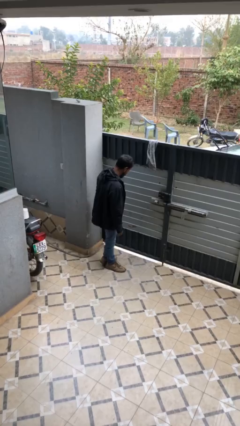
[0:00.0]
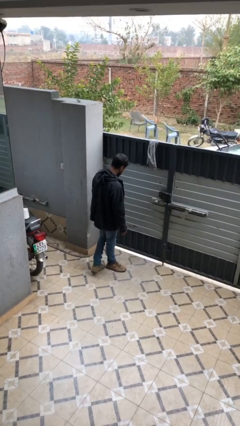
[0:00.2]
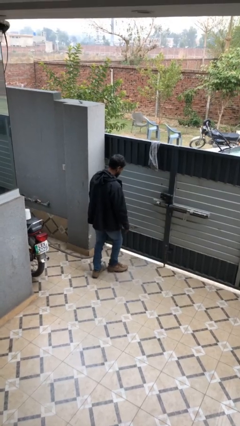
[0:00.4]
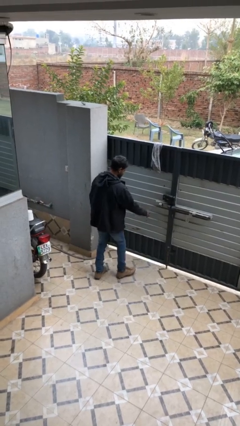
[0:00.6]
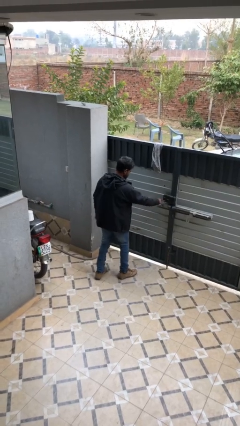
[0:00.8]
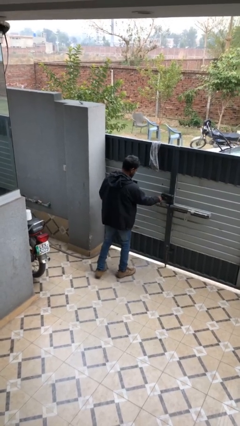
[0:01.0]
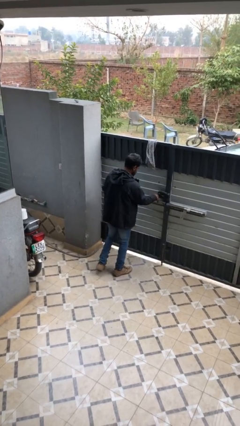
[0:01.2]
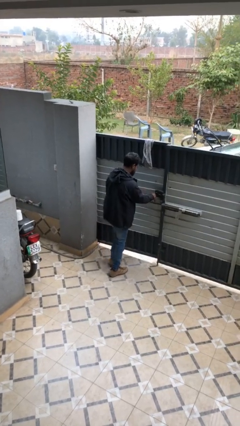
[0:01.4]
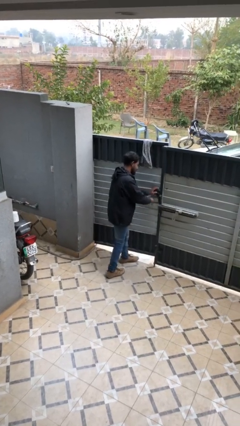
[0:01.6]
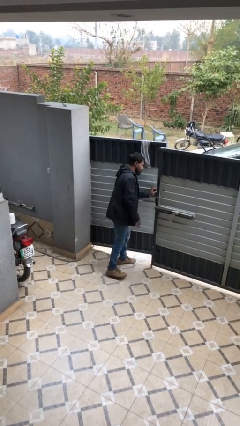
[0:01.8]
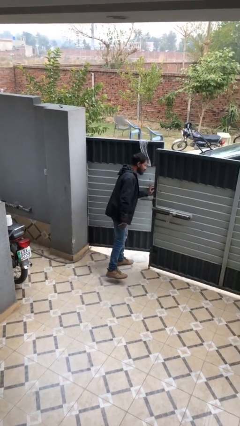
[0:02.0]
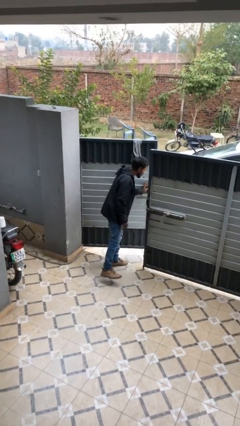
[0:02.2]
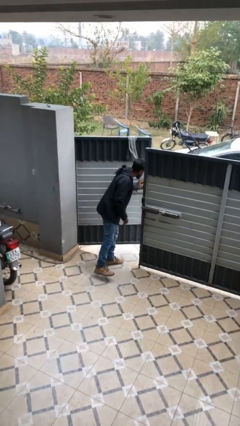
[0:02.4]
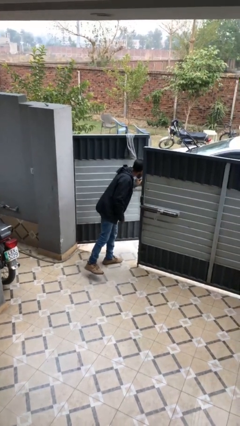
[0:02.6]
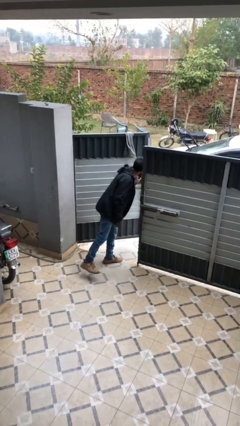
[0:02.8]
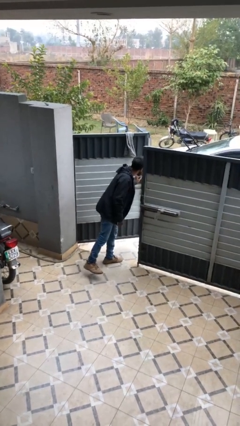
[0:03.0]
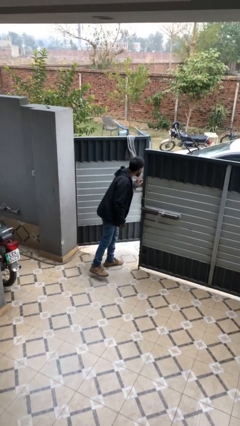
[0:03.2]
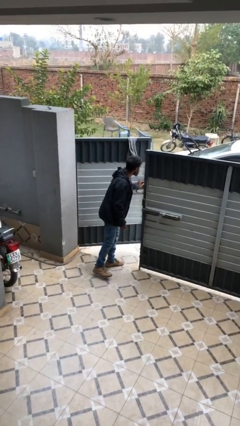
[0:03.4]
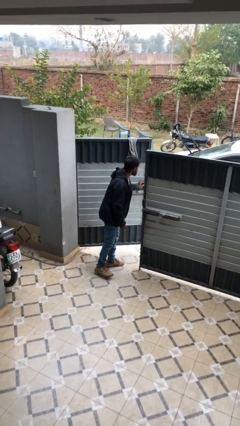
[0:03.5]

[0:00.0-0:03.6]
person opens facility door

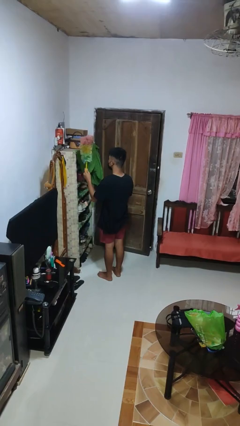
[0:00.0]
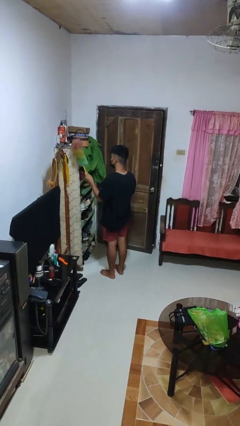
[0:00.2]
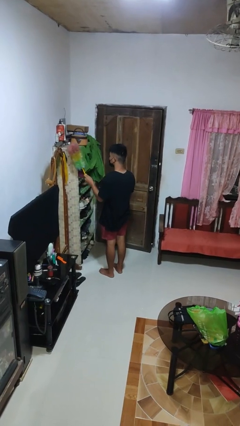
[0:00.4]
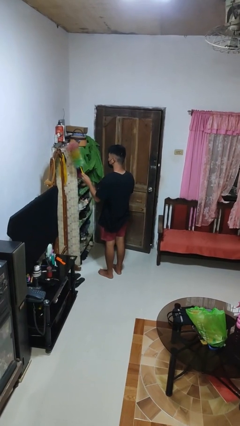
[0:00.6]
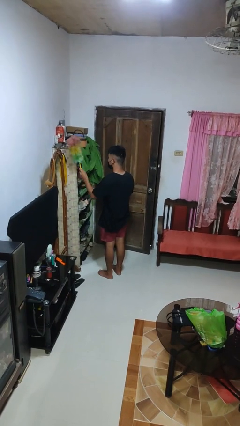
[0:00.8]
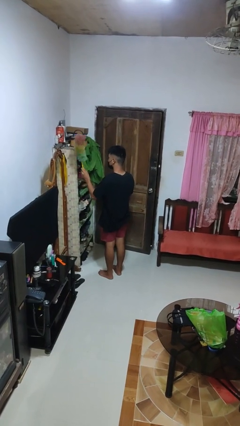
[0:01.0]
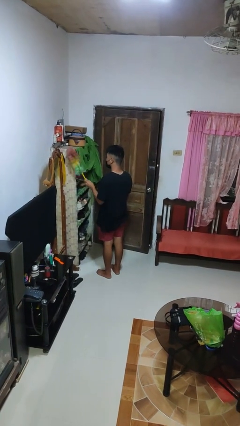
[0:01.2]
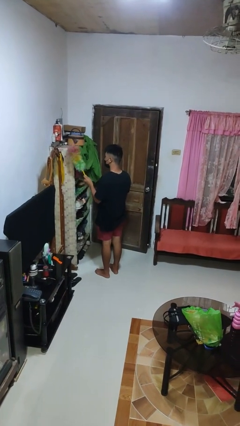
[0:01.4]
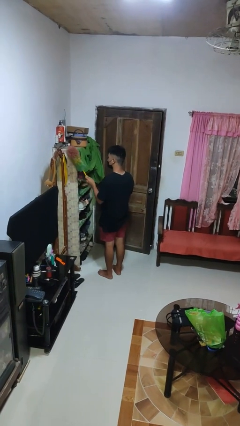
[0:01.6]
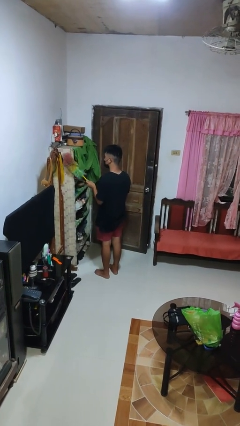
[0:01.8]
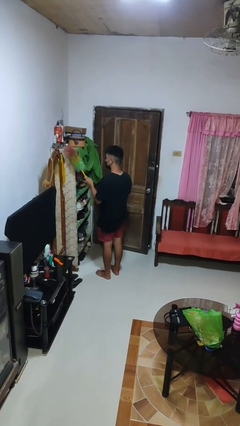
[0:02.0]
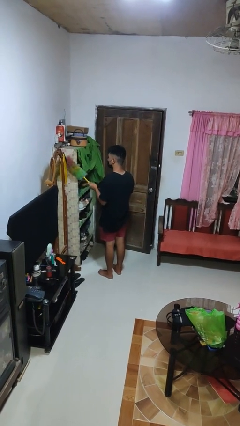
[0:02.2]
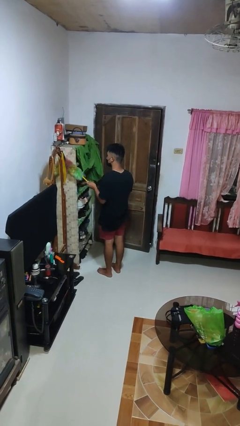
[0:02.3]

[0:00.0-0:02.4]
person dusts furniture

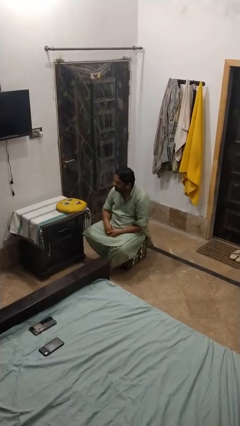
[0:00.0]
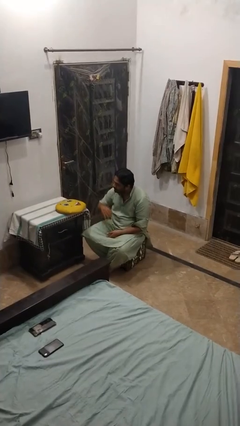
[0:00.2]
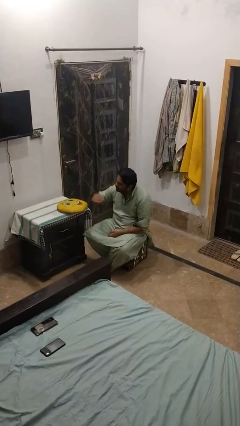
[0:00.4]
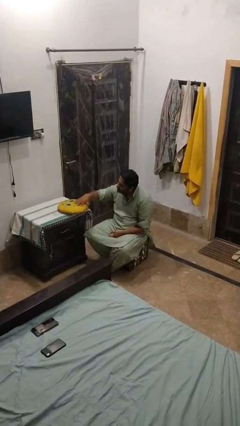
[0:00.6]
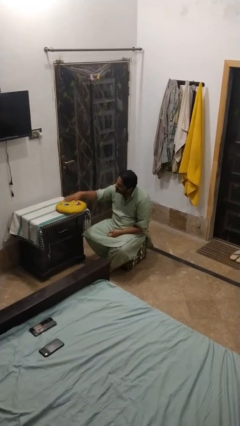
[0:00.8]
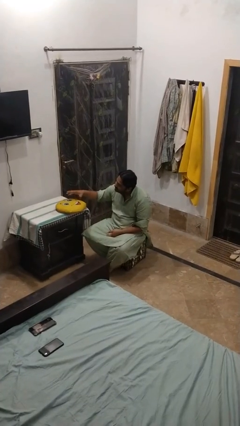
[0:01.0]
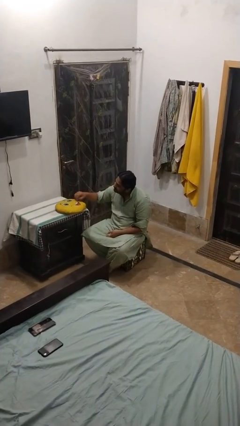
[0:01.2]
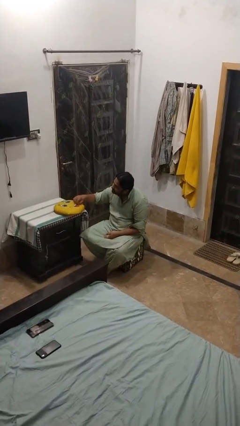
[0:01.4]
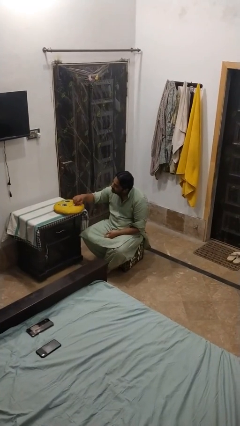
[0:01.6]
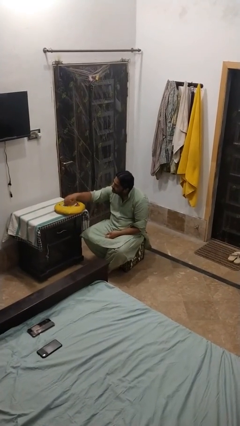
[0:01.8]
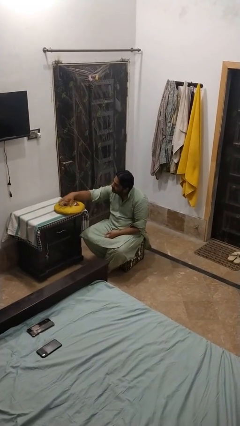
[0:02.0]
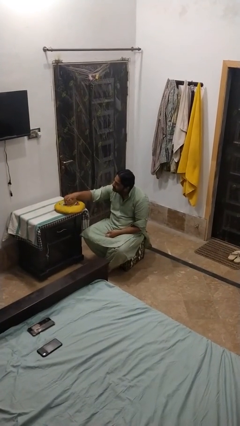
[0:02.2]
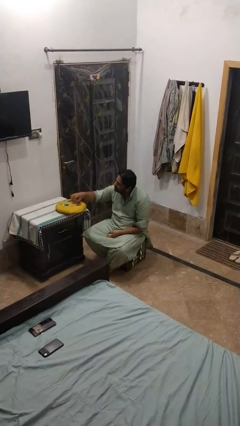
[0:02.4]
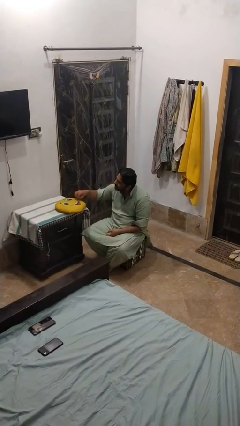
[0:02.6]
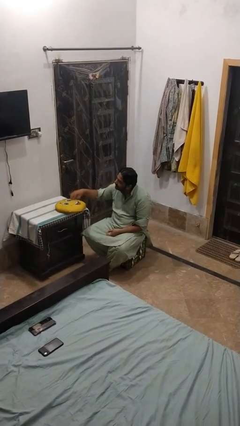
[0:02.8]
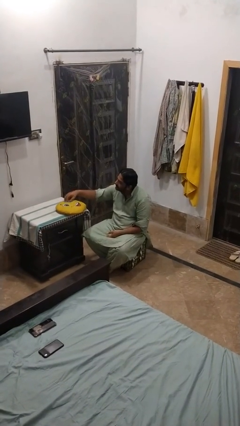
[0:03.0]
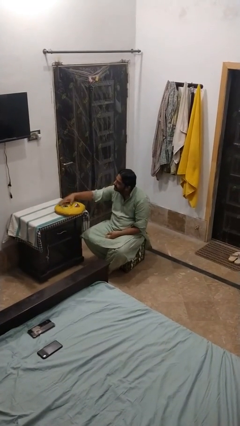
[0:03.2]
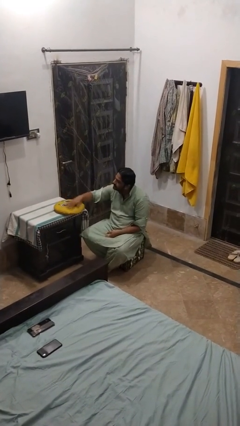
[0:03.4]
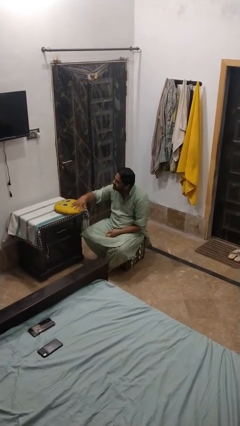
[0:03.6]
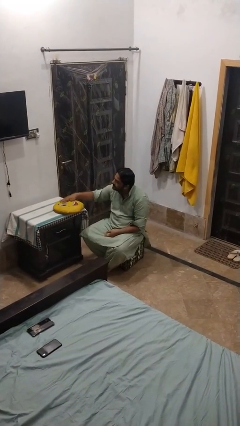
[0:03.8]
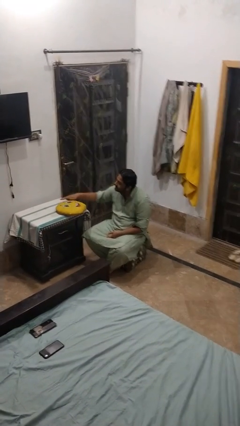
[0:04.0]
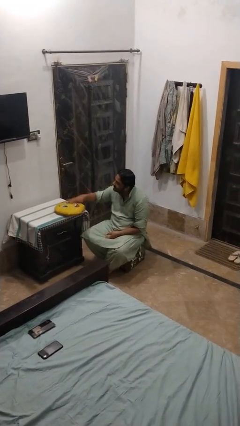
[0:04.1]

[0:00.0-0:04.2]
person waves hand over object

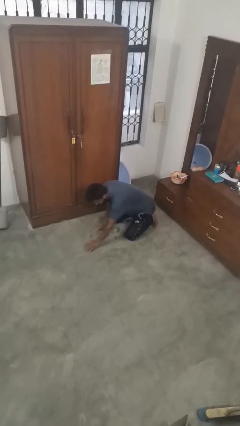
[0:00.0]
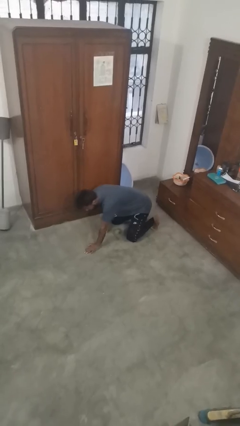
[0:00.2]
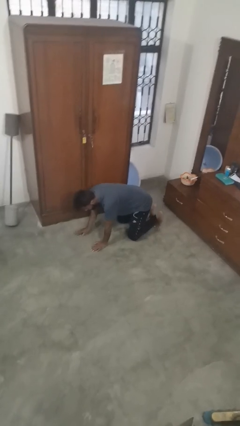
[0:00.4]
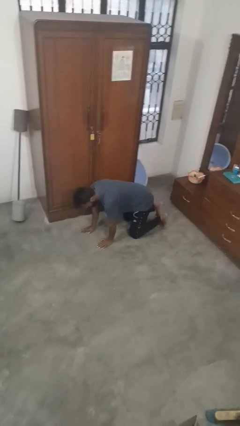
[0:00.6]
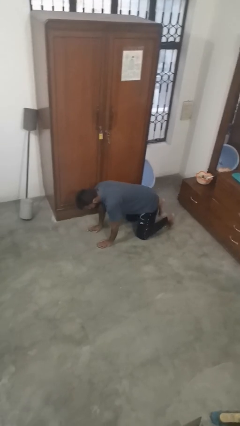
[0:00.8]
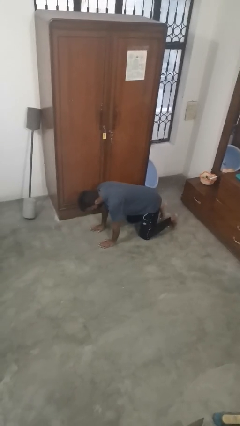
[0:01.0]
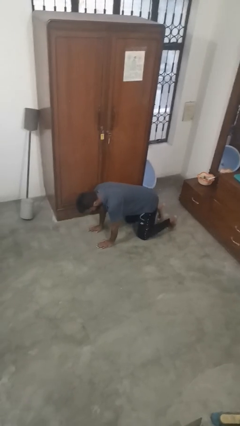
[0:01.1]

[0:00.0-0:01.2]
person crawls

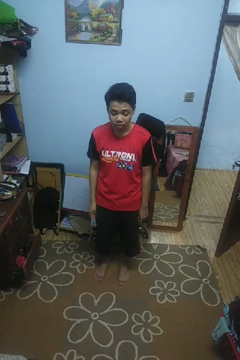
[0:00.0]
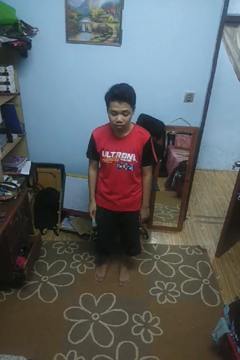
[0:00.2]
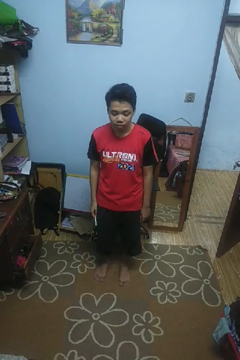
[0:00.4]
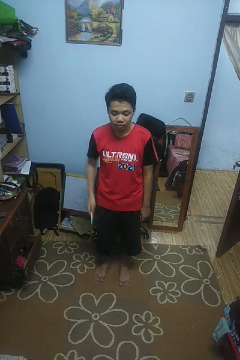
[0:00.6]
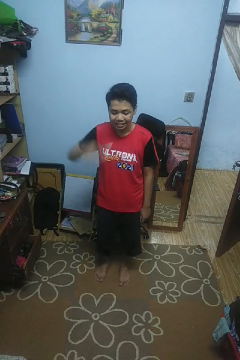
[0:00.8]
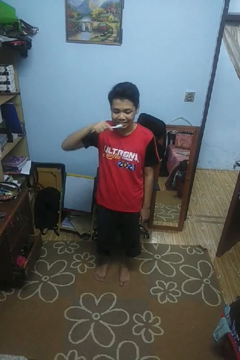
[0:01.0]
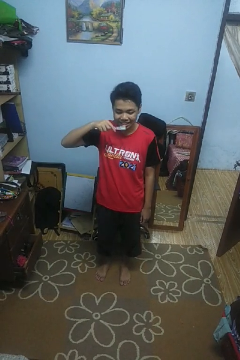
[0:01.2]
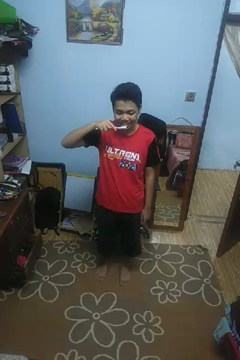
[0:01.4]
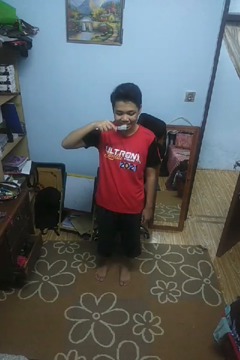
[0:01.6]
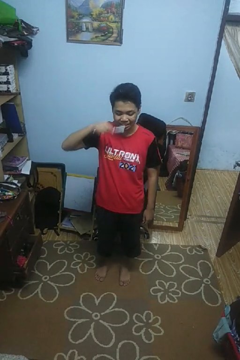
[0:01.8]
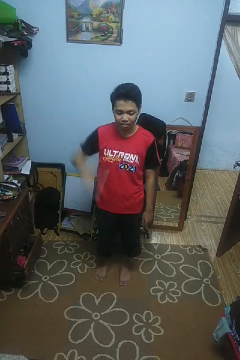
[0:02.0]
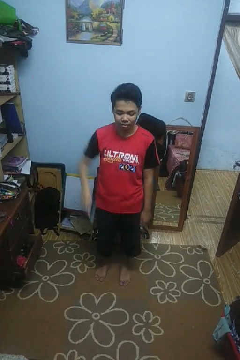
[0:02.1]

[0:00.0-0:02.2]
person brushes teeth

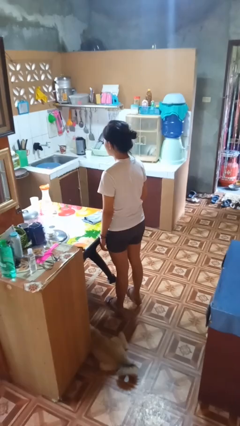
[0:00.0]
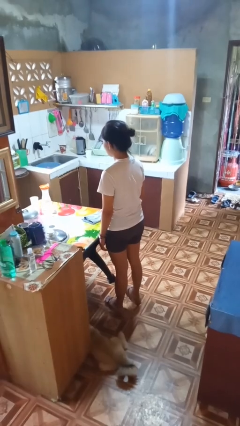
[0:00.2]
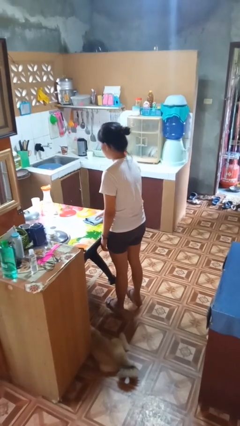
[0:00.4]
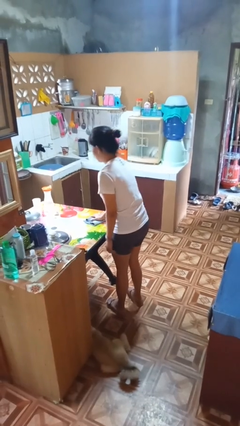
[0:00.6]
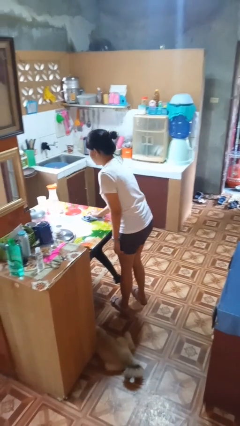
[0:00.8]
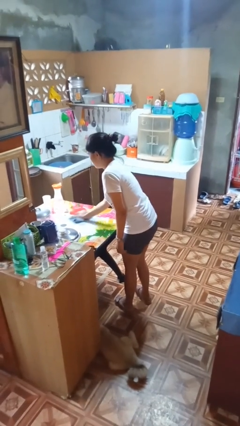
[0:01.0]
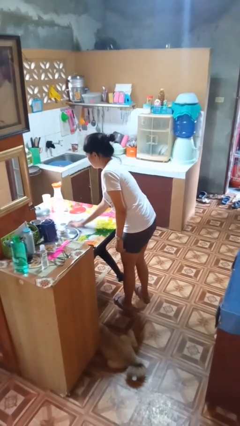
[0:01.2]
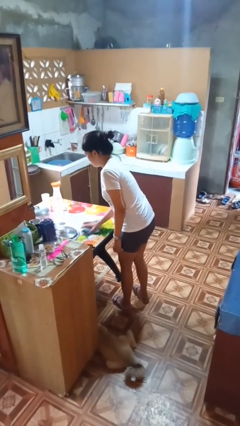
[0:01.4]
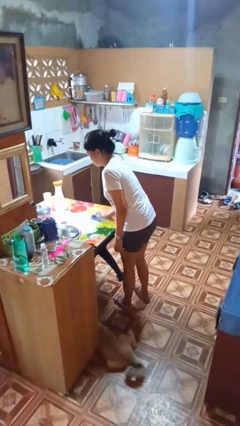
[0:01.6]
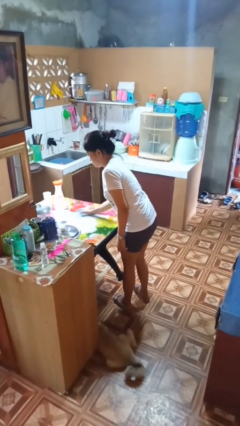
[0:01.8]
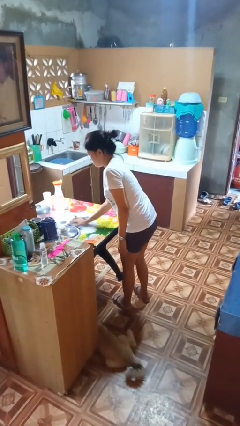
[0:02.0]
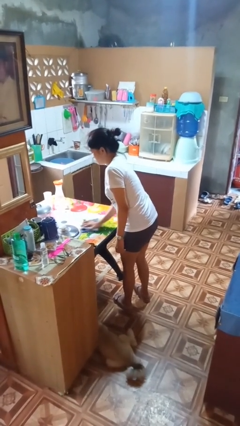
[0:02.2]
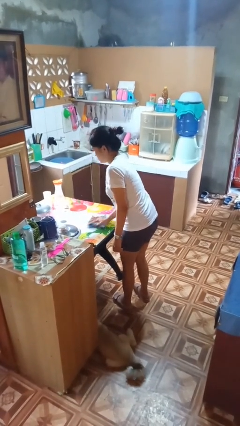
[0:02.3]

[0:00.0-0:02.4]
person cleans table with rag

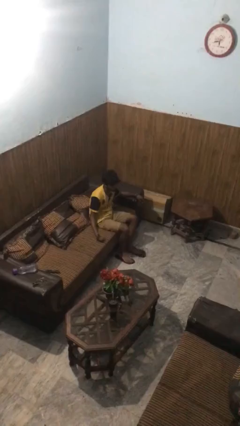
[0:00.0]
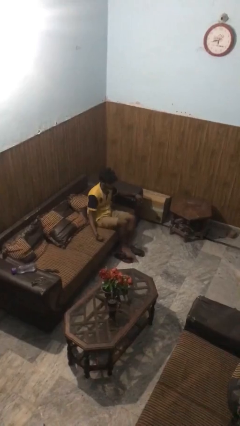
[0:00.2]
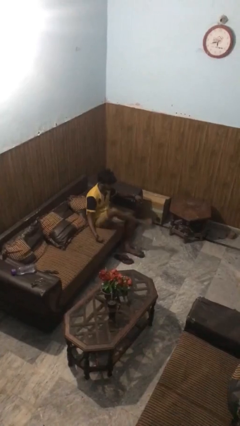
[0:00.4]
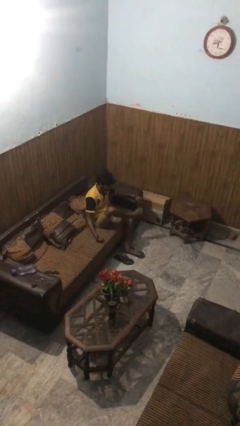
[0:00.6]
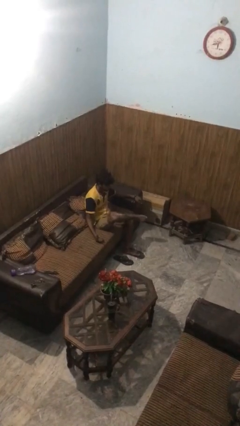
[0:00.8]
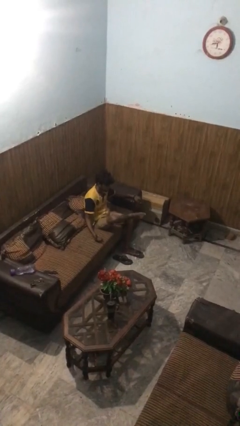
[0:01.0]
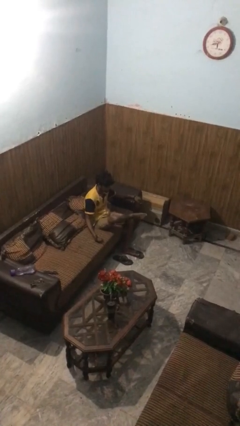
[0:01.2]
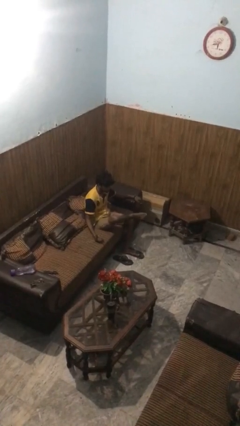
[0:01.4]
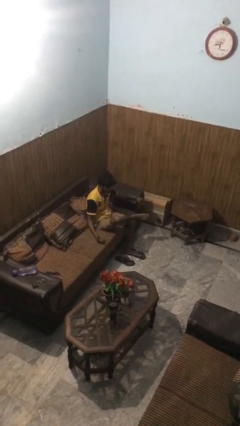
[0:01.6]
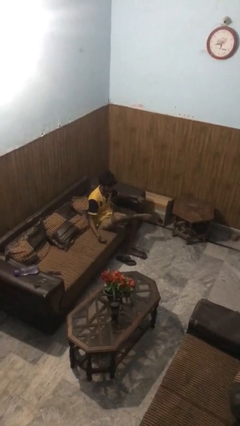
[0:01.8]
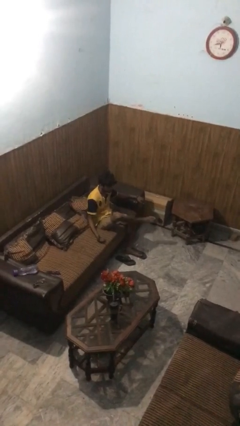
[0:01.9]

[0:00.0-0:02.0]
person crosses legs
